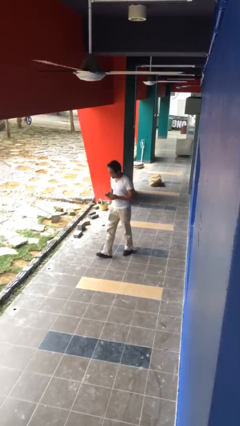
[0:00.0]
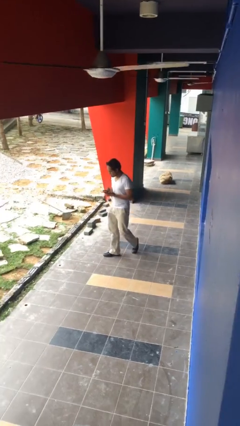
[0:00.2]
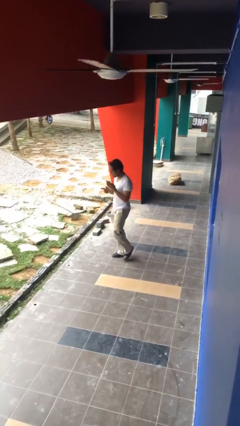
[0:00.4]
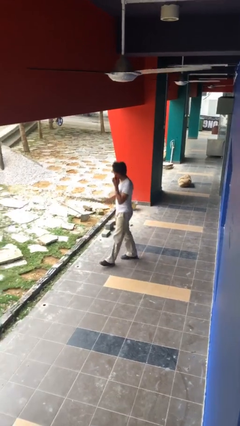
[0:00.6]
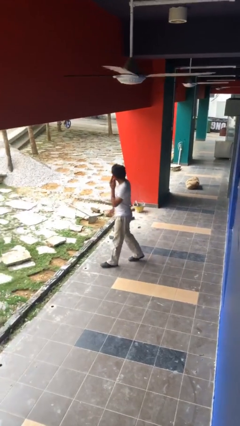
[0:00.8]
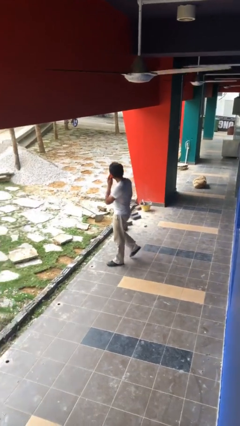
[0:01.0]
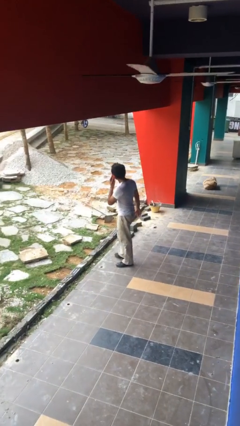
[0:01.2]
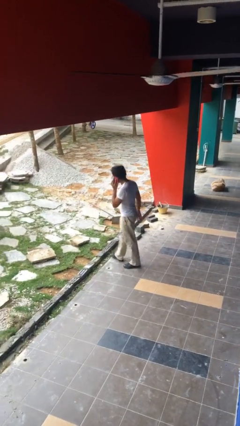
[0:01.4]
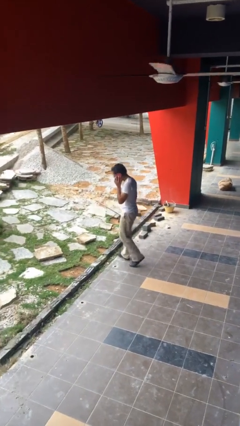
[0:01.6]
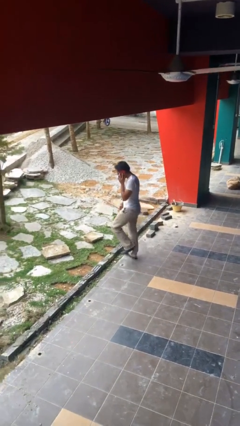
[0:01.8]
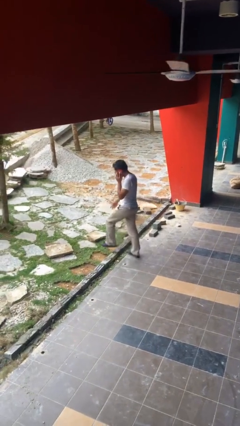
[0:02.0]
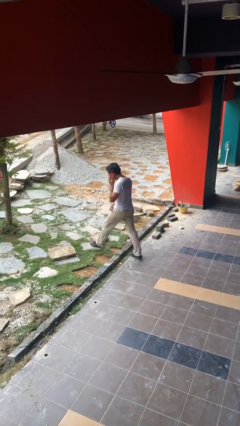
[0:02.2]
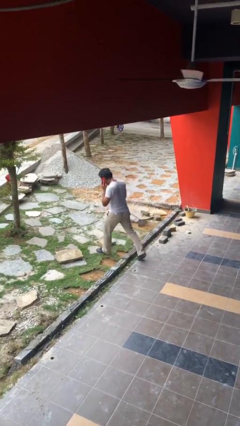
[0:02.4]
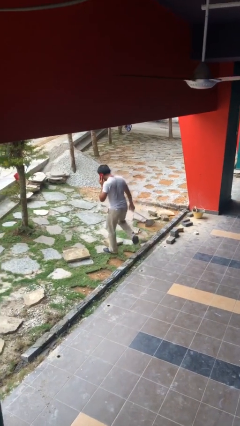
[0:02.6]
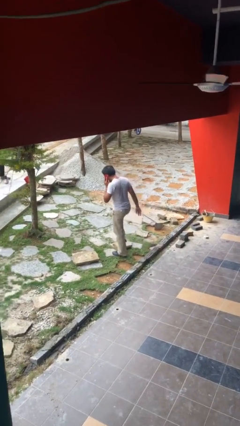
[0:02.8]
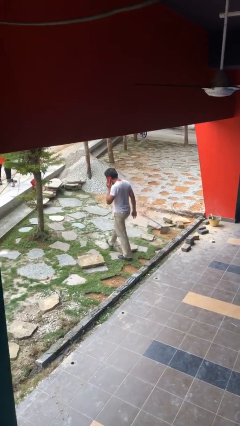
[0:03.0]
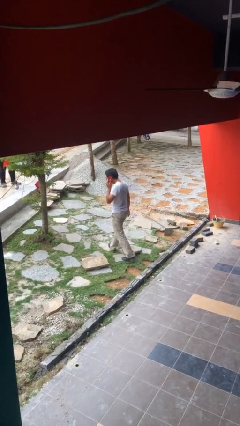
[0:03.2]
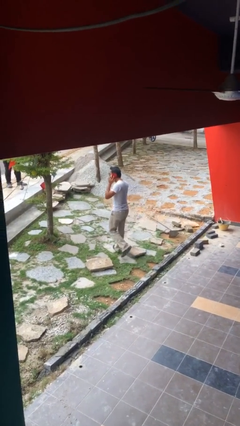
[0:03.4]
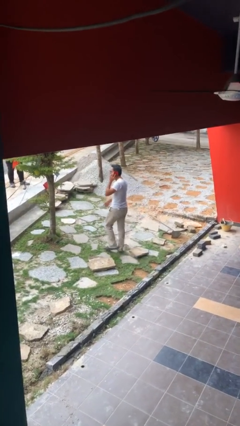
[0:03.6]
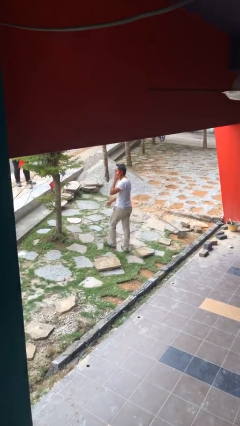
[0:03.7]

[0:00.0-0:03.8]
person talks on phone

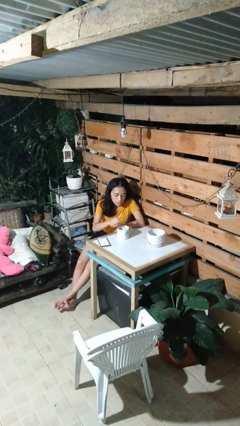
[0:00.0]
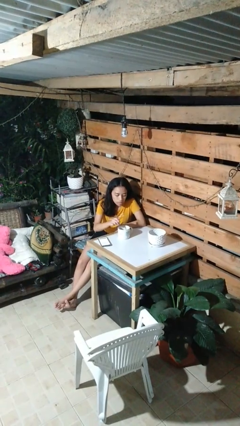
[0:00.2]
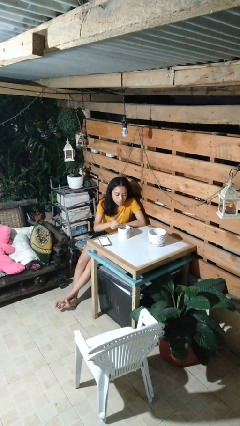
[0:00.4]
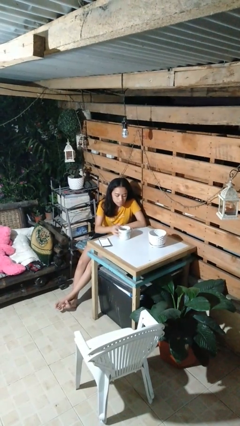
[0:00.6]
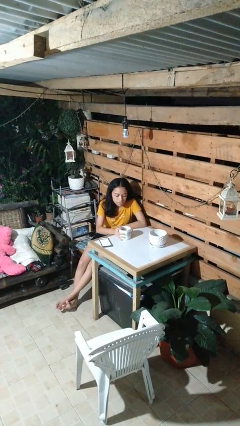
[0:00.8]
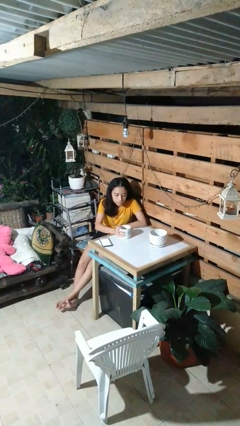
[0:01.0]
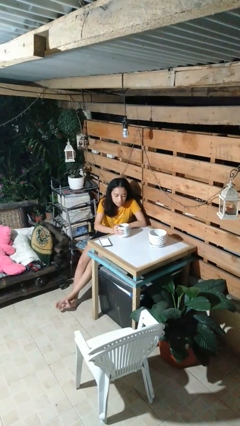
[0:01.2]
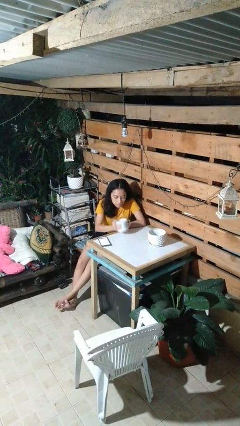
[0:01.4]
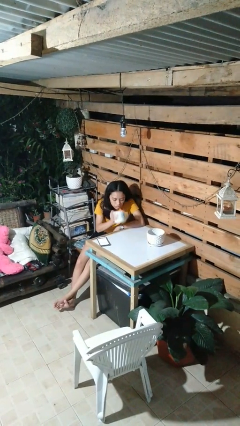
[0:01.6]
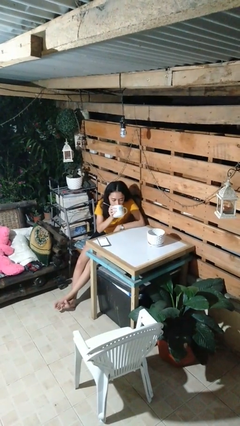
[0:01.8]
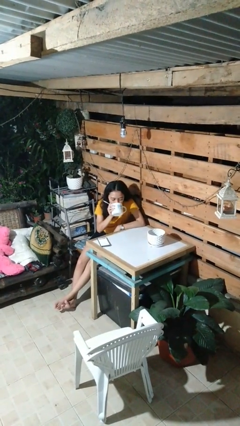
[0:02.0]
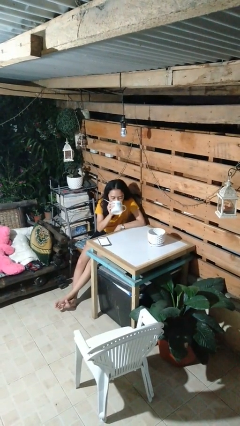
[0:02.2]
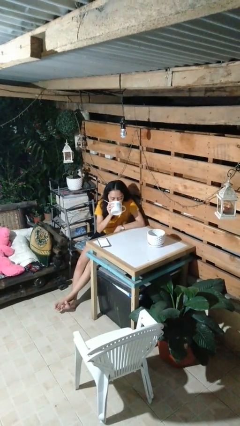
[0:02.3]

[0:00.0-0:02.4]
person drinks from mug

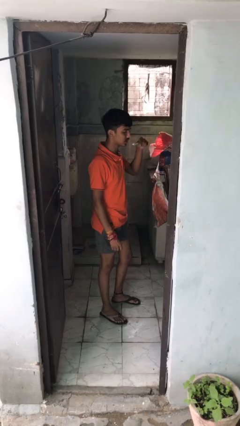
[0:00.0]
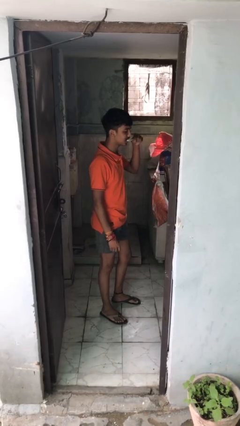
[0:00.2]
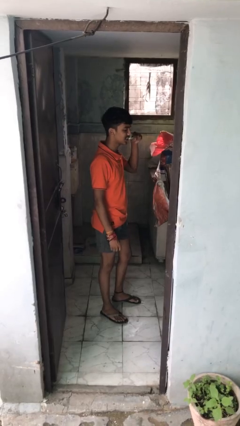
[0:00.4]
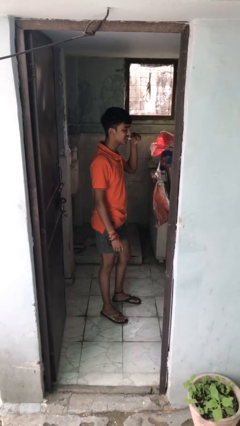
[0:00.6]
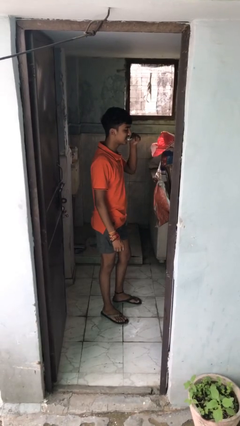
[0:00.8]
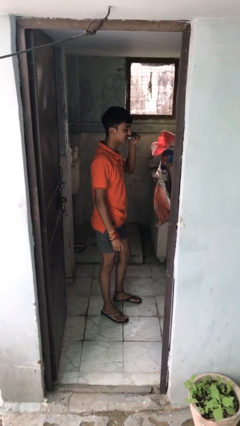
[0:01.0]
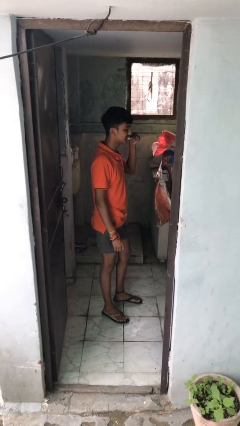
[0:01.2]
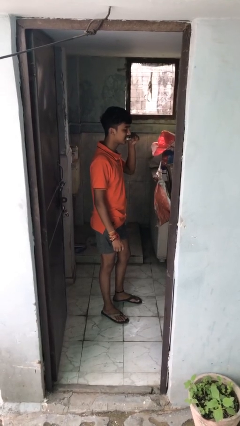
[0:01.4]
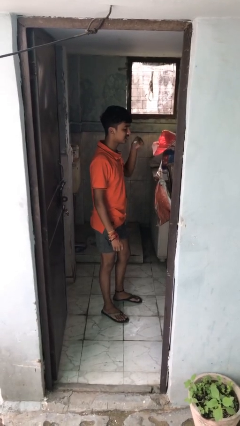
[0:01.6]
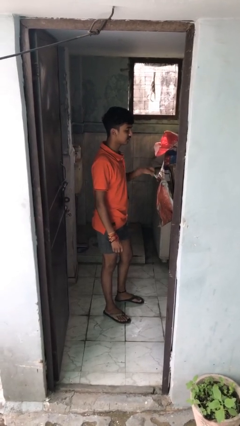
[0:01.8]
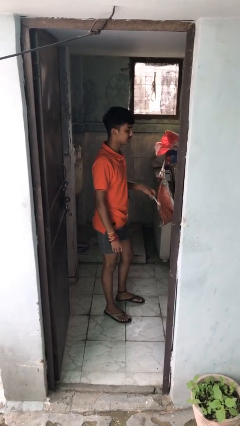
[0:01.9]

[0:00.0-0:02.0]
person brushes teeth

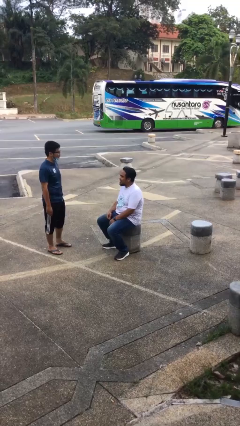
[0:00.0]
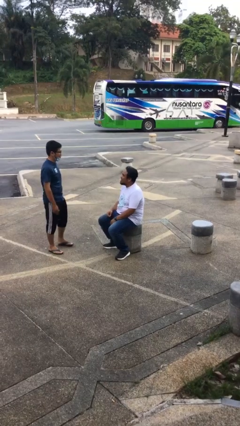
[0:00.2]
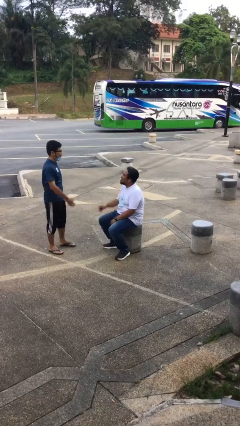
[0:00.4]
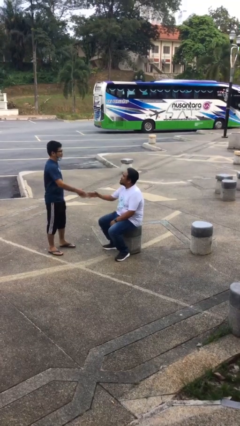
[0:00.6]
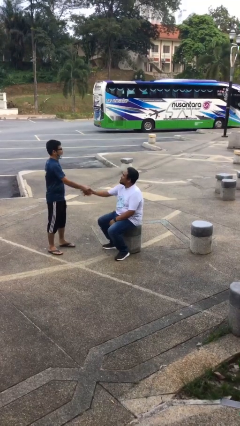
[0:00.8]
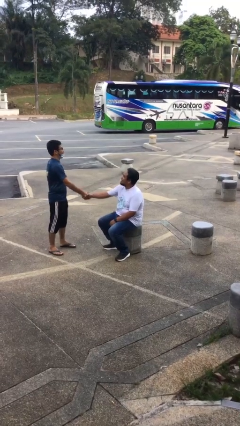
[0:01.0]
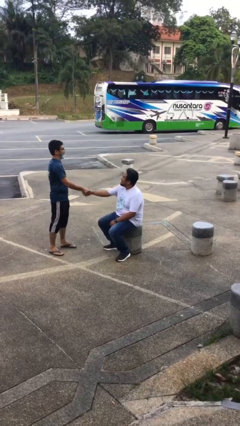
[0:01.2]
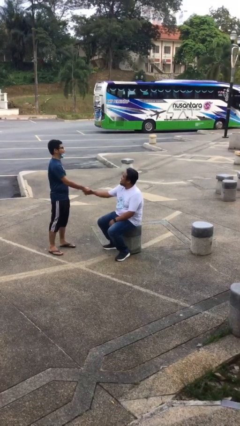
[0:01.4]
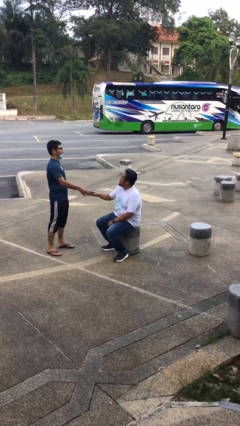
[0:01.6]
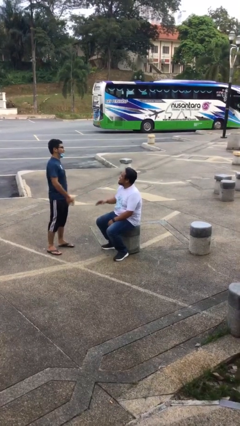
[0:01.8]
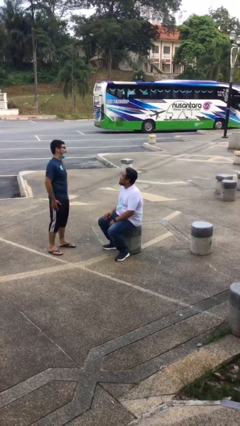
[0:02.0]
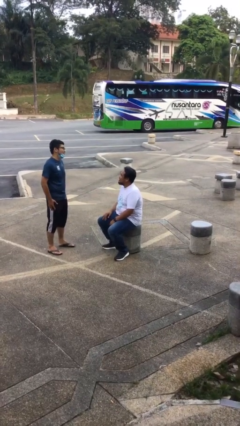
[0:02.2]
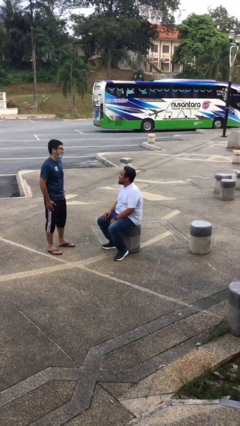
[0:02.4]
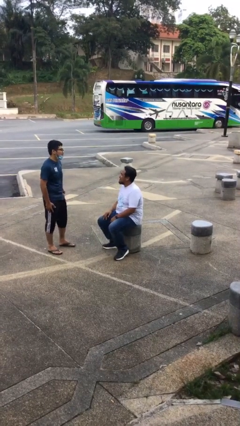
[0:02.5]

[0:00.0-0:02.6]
person shakes hand

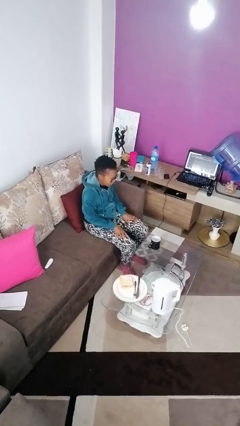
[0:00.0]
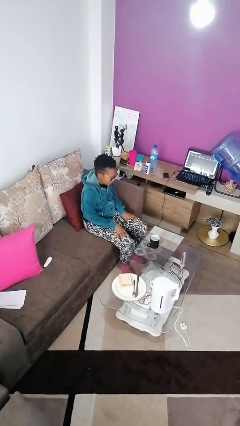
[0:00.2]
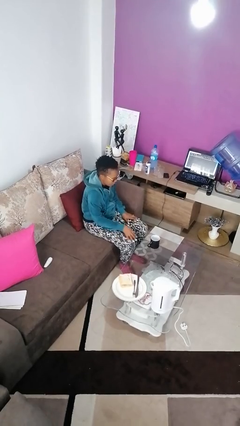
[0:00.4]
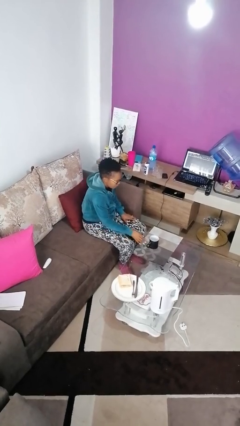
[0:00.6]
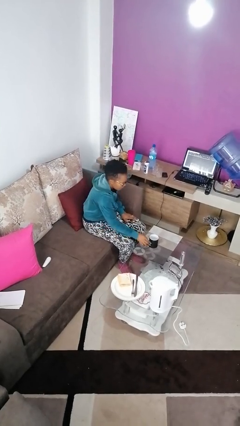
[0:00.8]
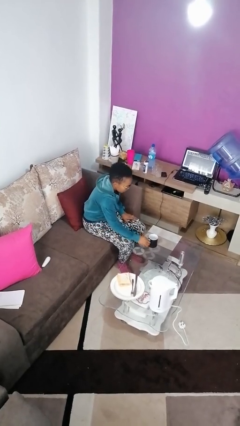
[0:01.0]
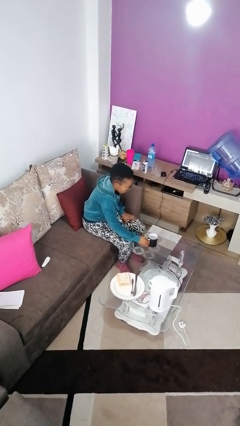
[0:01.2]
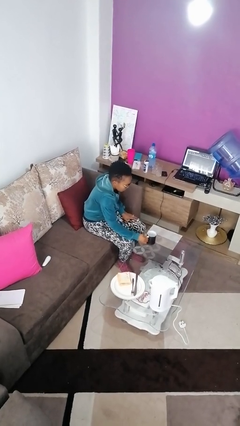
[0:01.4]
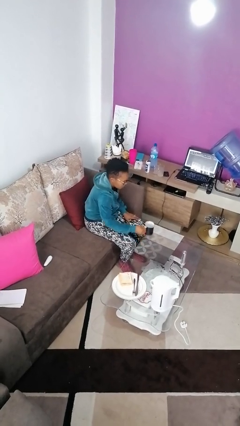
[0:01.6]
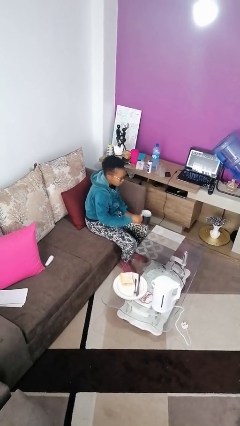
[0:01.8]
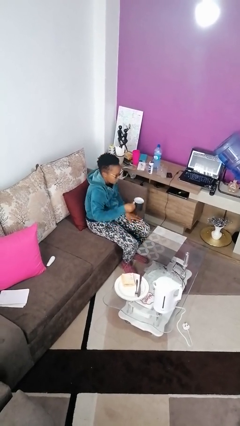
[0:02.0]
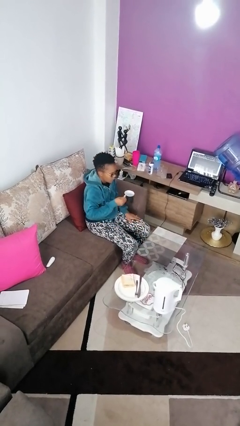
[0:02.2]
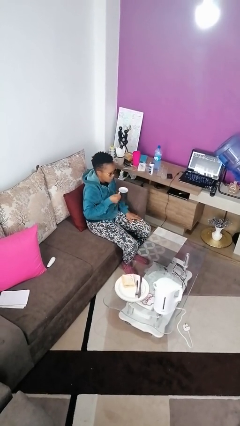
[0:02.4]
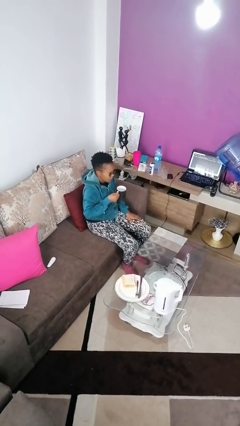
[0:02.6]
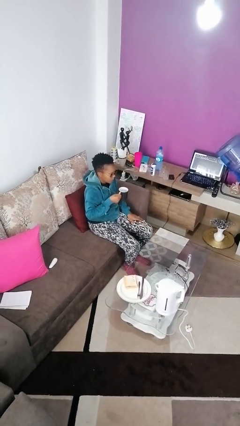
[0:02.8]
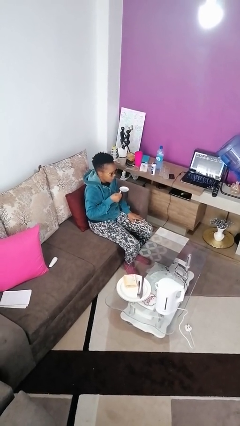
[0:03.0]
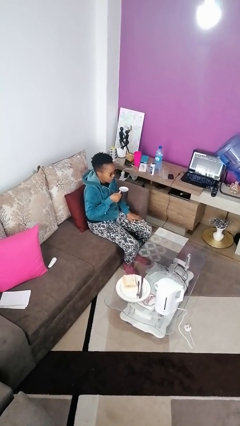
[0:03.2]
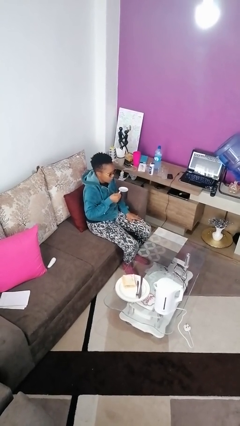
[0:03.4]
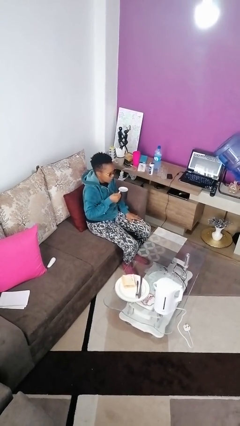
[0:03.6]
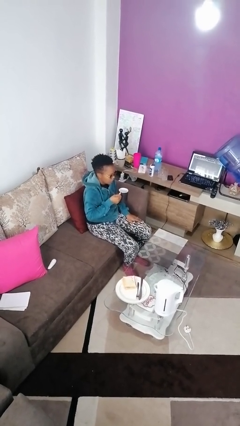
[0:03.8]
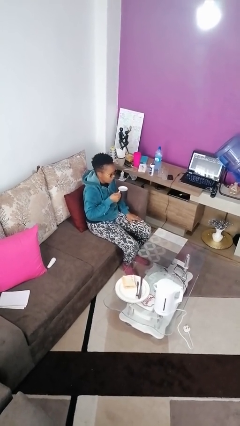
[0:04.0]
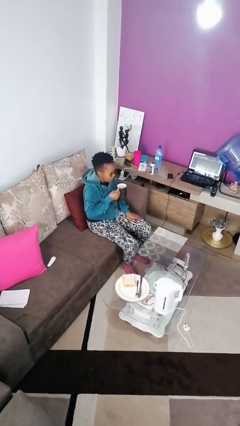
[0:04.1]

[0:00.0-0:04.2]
person picks up object from table

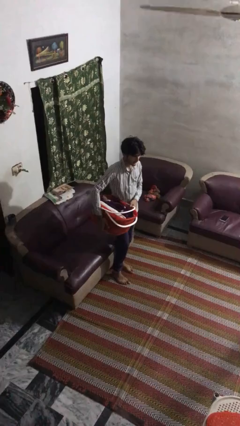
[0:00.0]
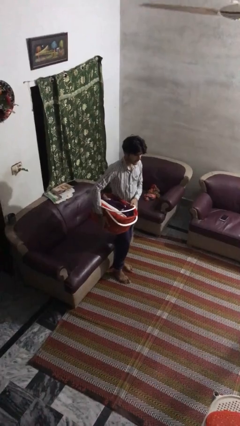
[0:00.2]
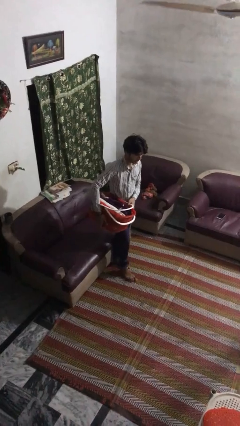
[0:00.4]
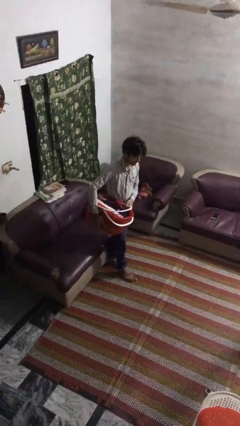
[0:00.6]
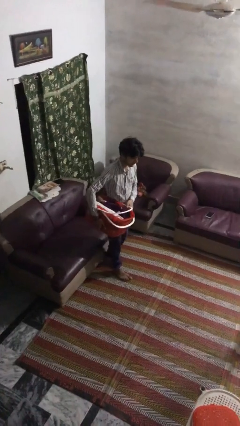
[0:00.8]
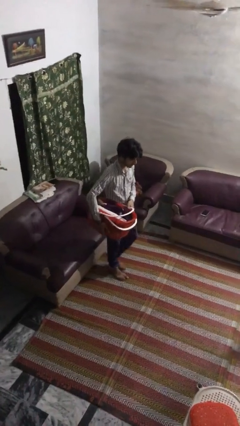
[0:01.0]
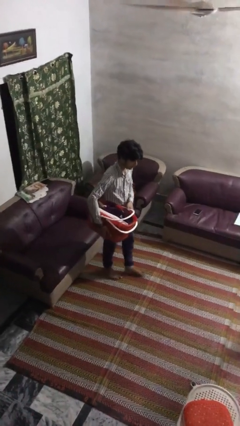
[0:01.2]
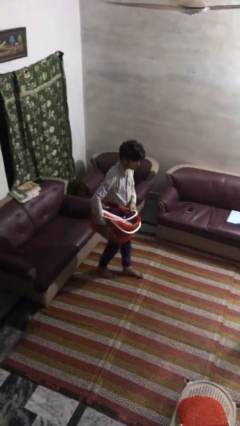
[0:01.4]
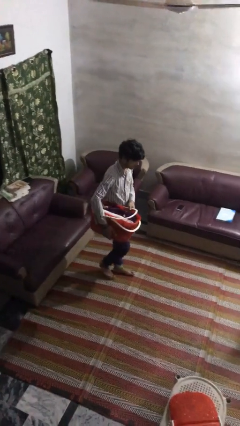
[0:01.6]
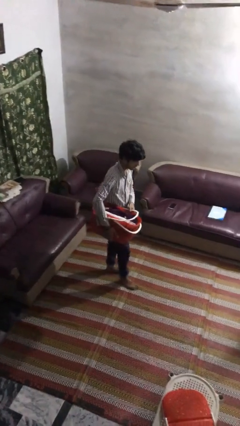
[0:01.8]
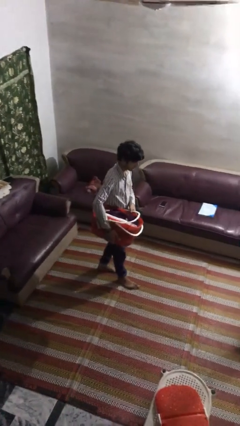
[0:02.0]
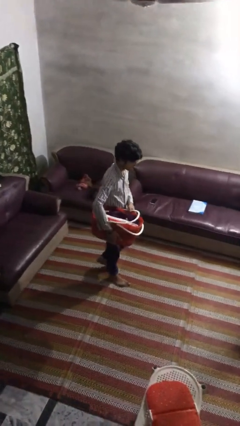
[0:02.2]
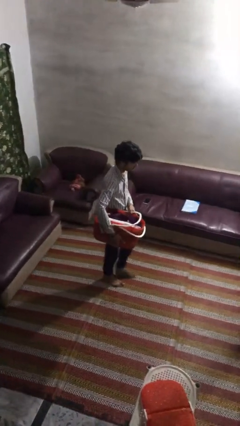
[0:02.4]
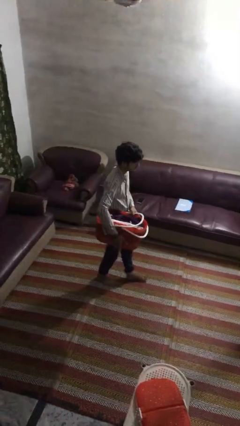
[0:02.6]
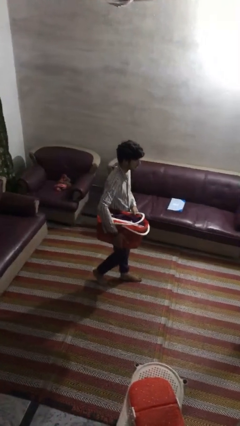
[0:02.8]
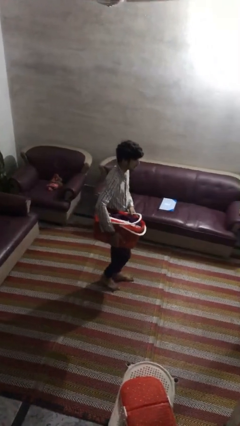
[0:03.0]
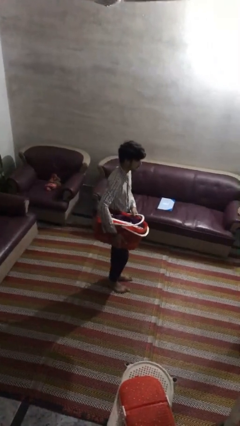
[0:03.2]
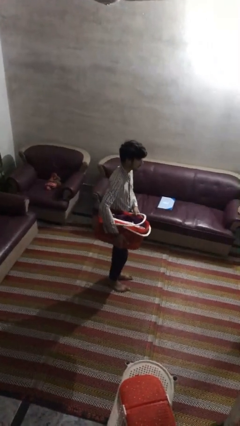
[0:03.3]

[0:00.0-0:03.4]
person carries laundry basket
